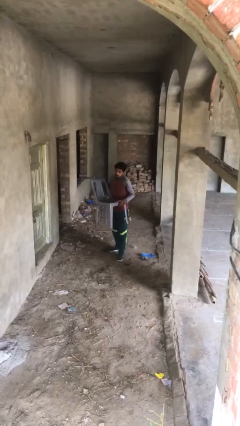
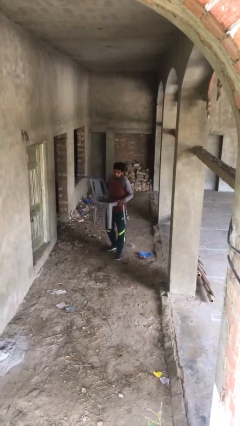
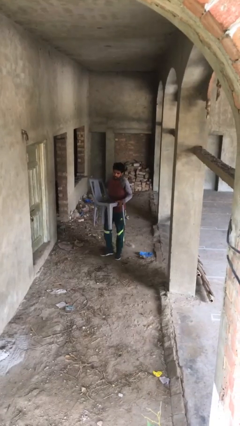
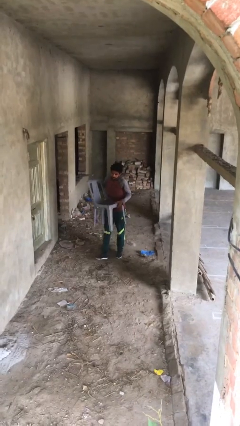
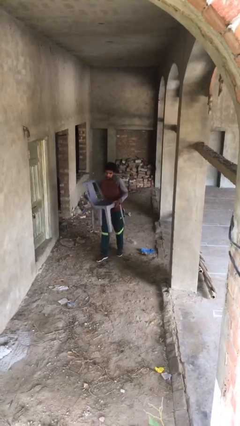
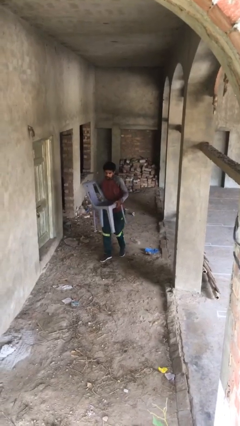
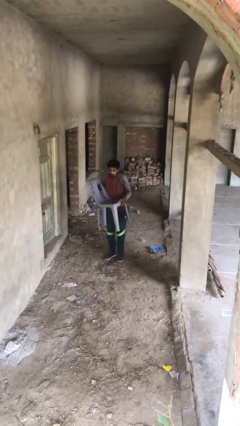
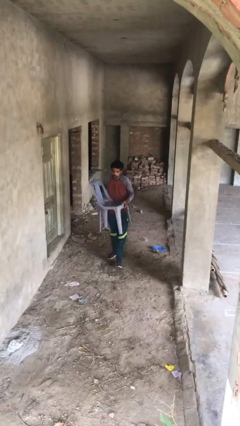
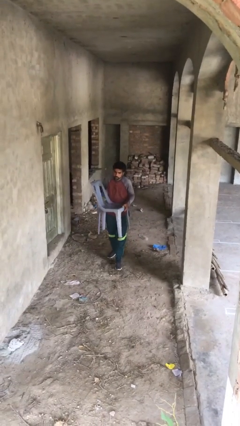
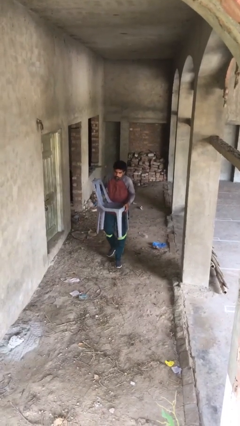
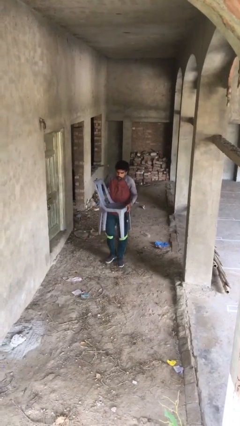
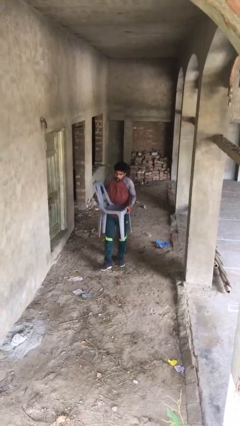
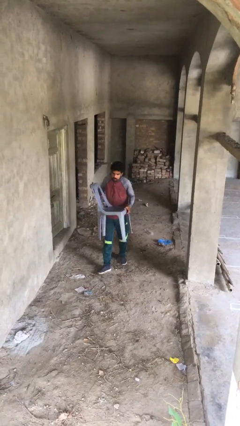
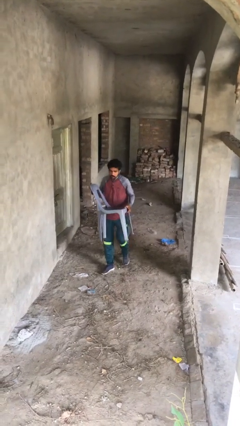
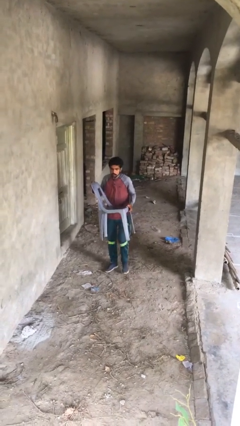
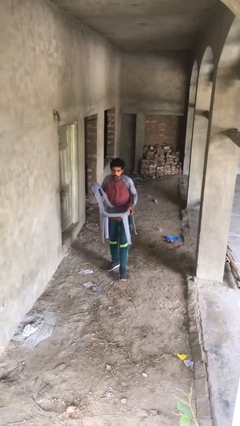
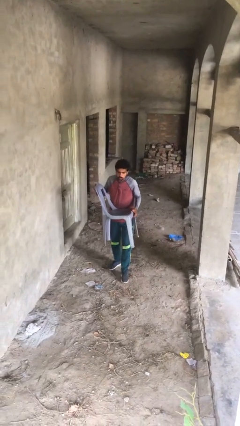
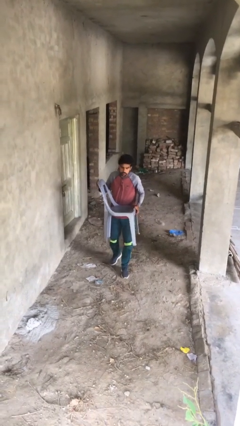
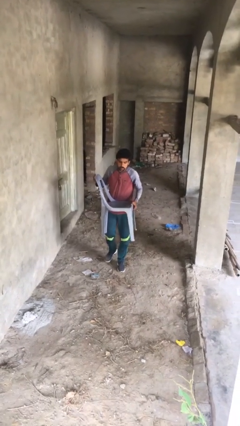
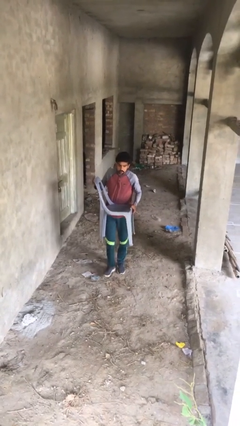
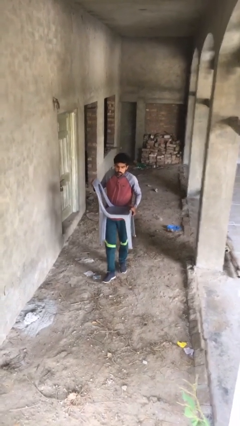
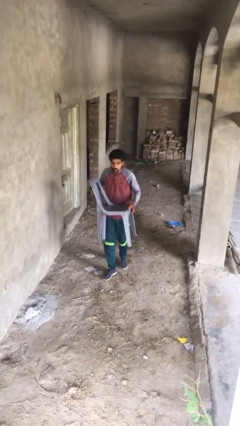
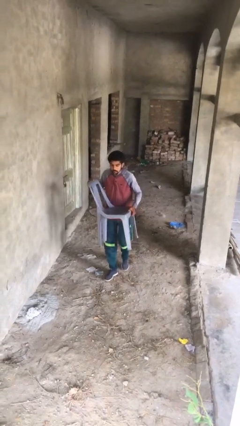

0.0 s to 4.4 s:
person carries heavy object

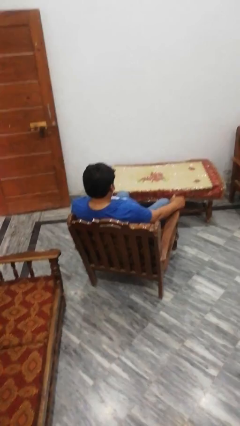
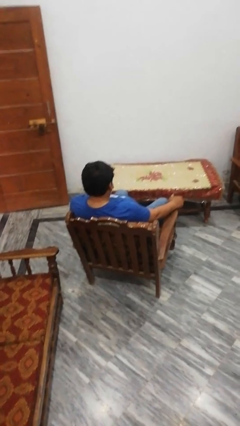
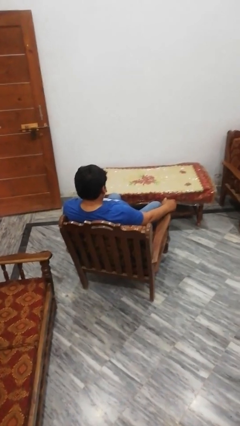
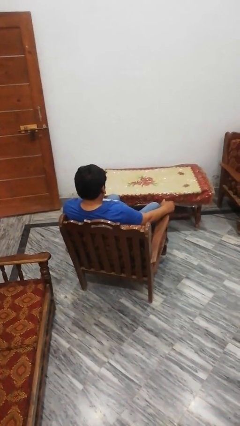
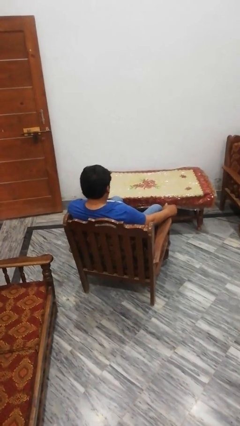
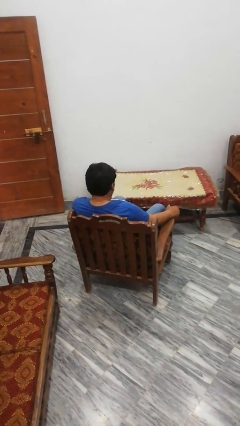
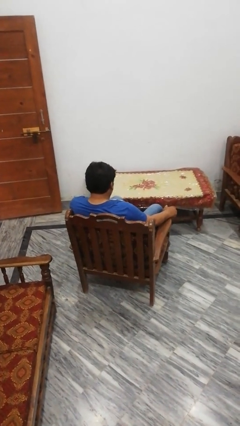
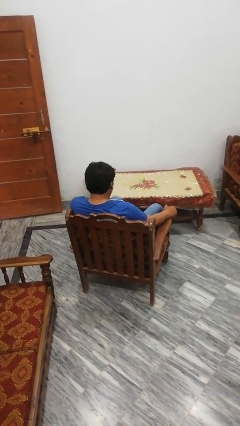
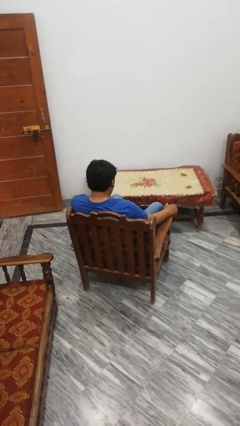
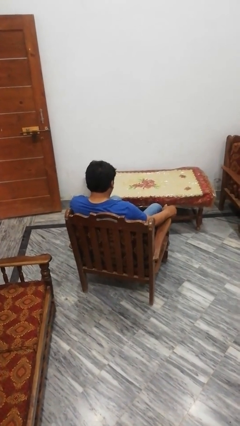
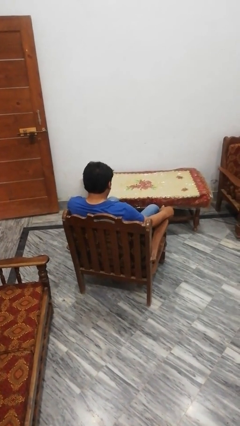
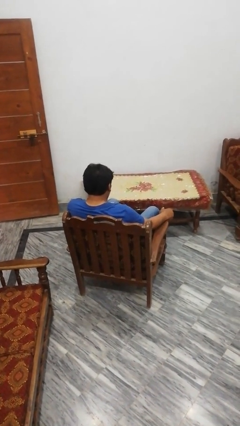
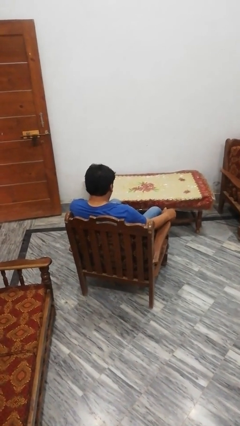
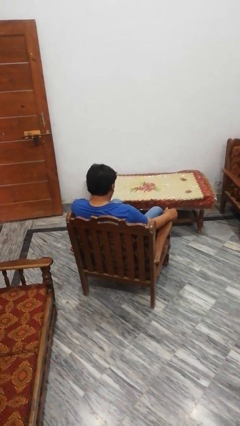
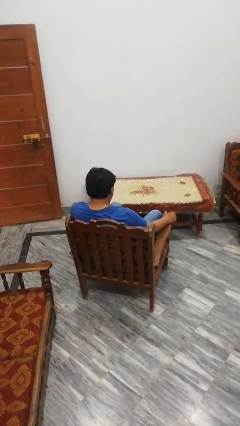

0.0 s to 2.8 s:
person pushes in chair

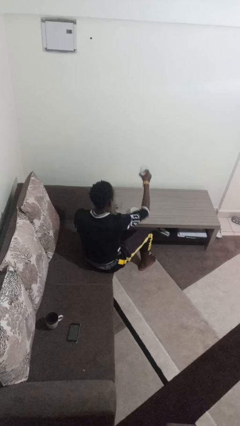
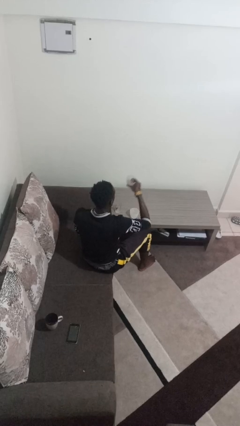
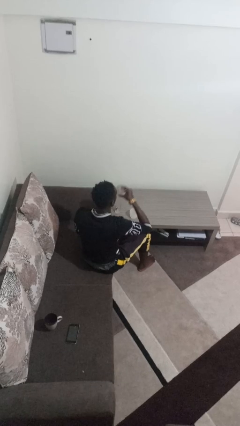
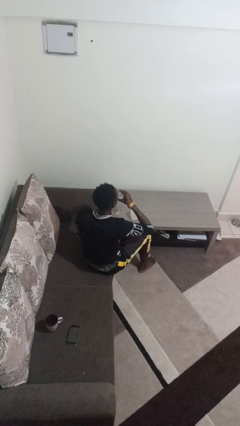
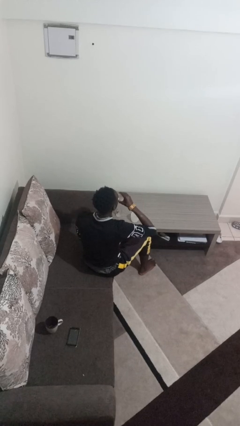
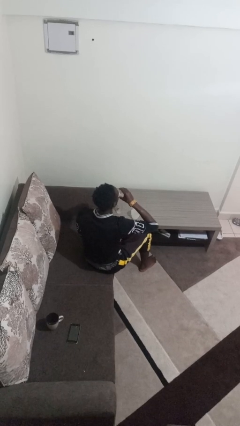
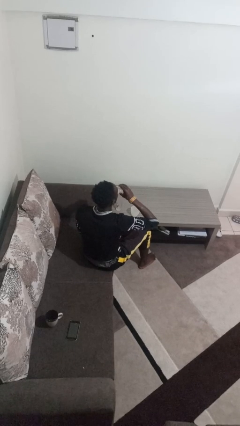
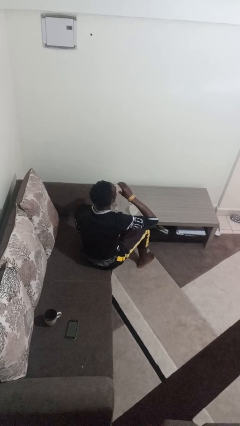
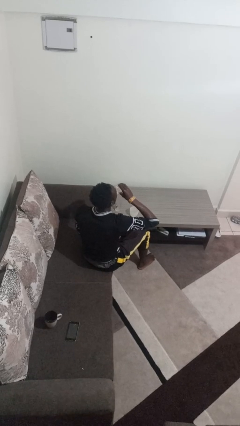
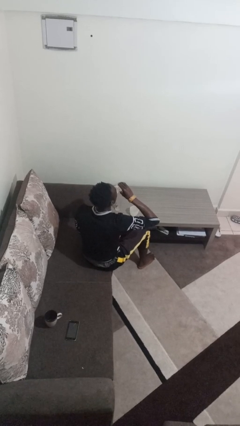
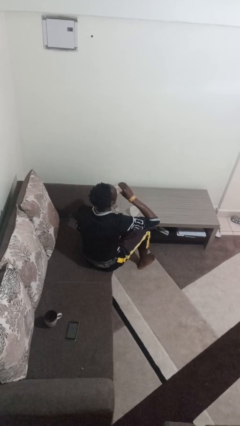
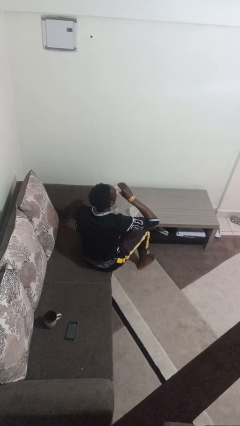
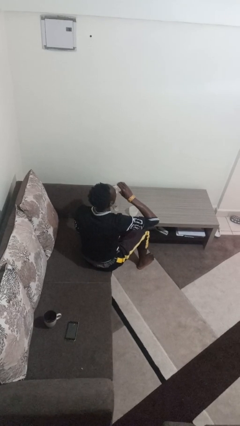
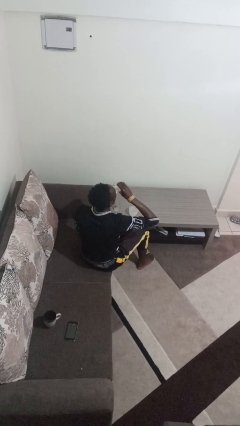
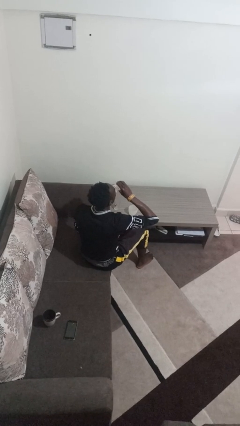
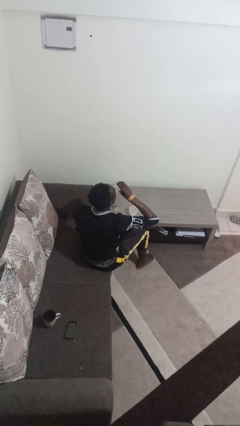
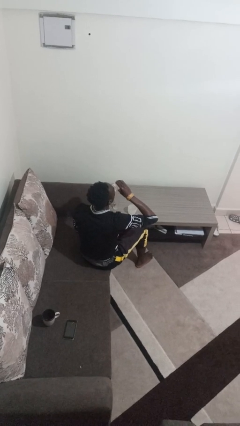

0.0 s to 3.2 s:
person drinks from shotglass

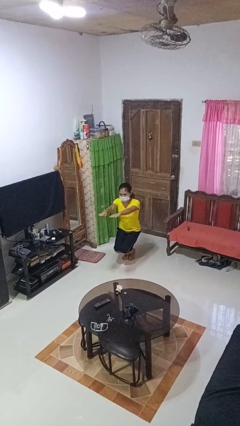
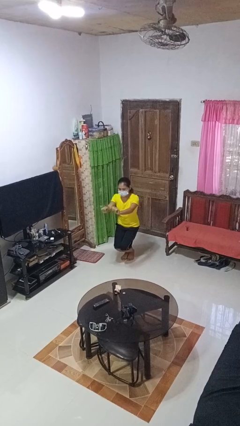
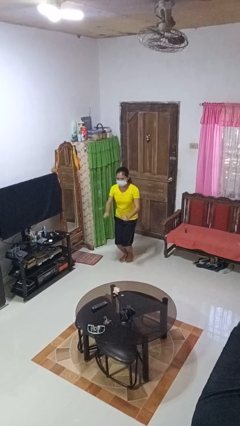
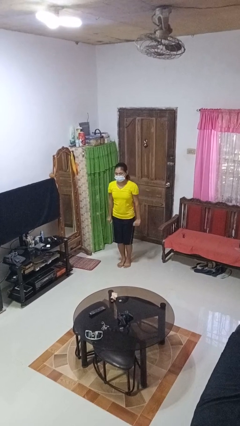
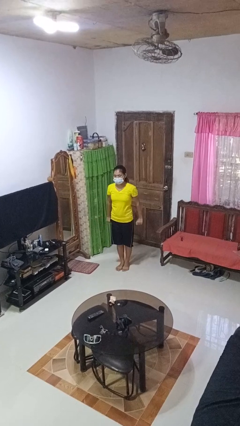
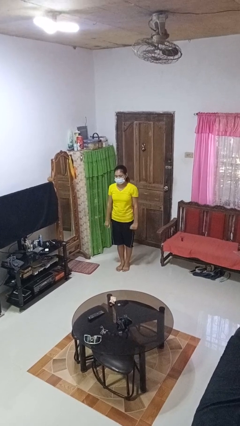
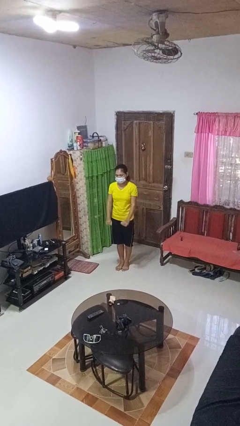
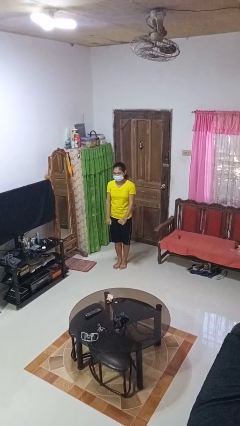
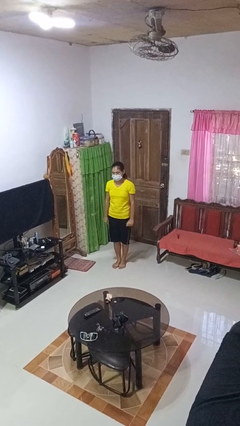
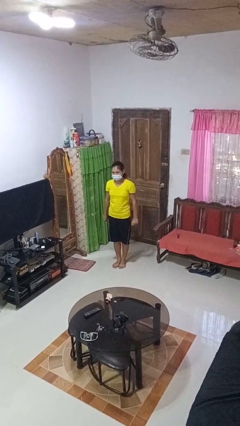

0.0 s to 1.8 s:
person stands up

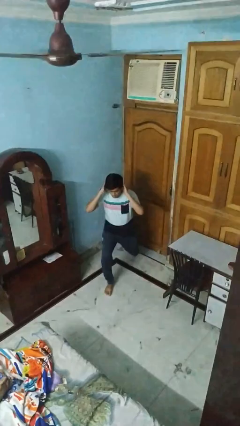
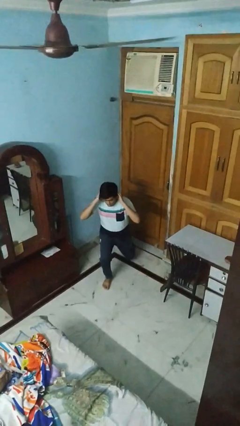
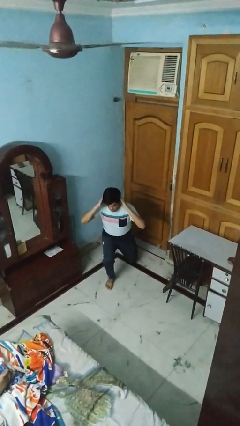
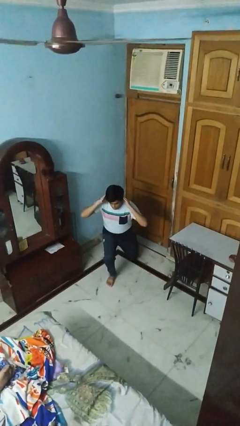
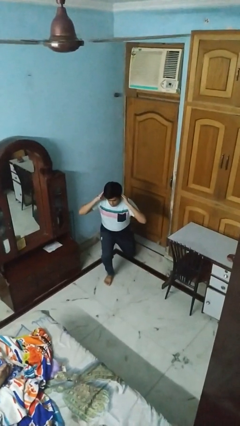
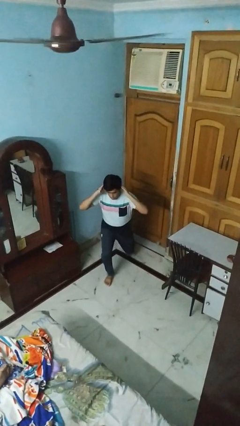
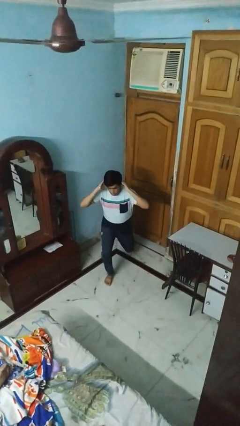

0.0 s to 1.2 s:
person exercises with lunges

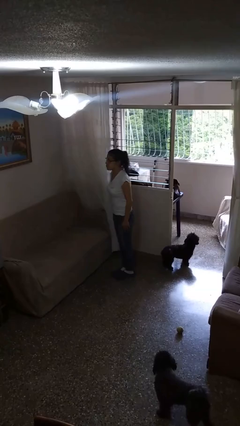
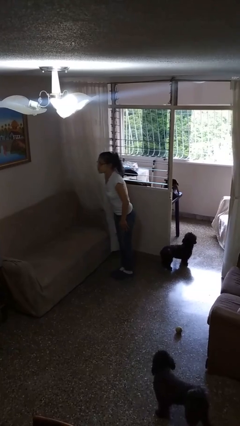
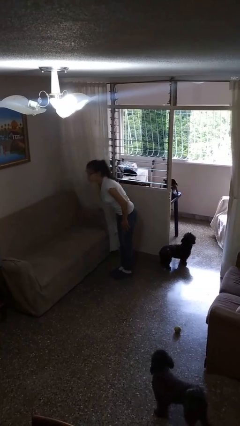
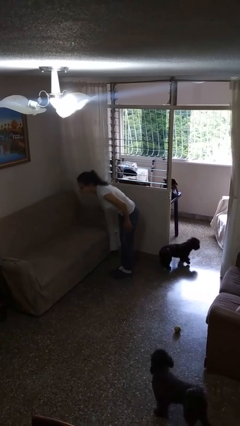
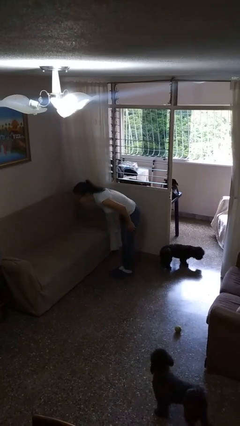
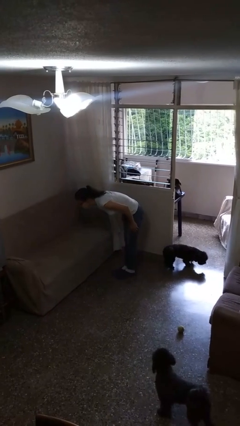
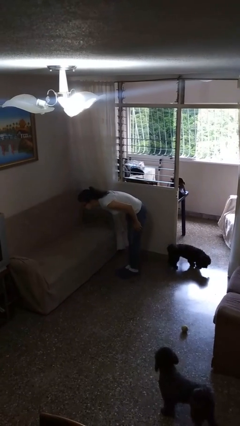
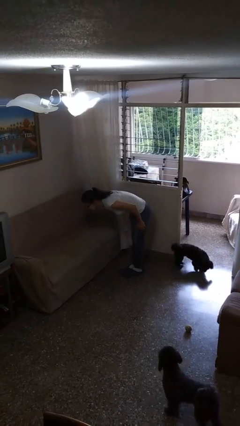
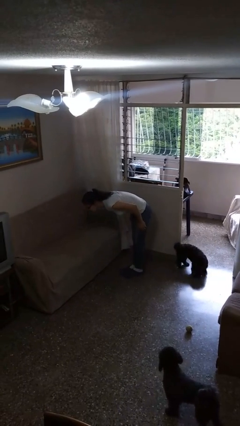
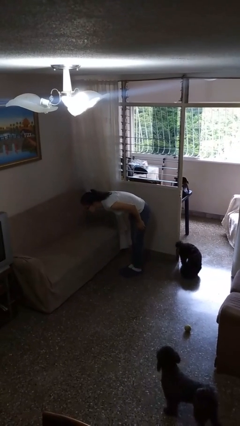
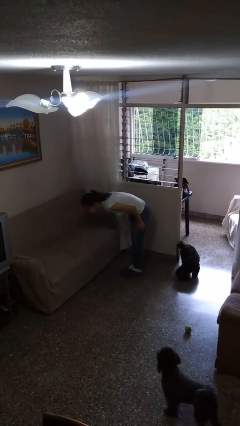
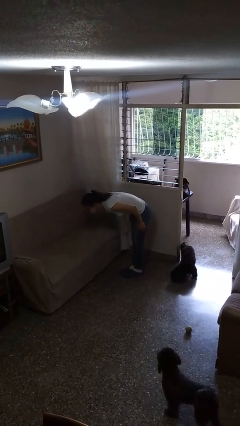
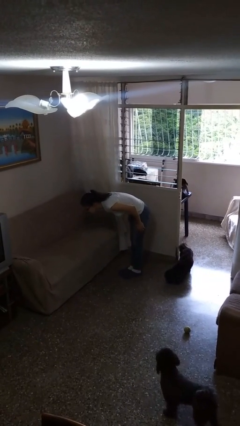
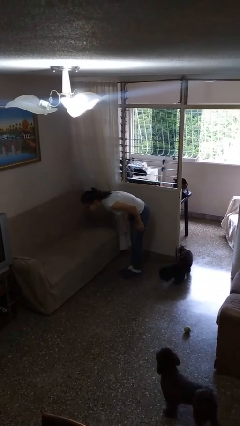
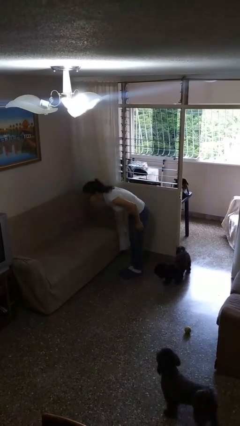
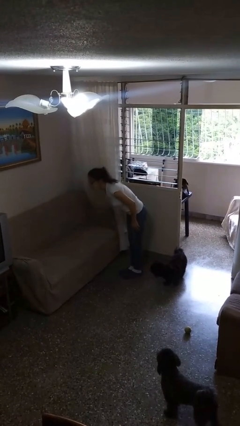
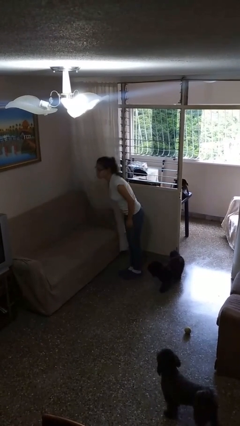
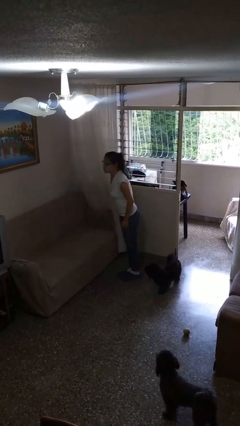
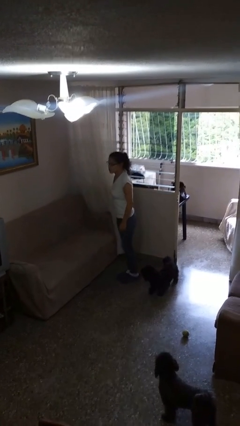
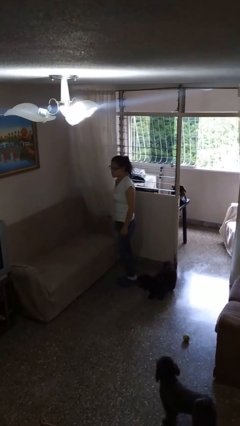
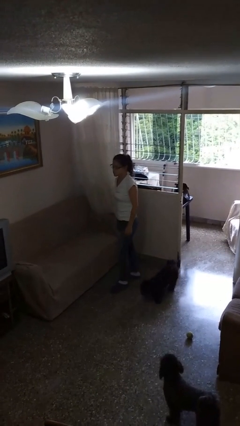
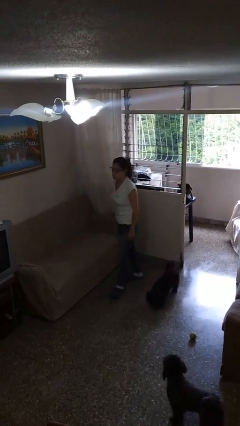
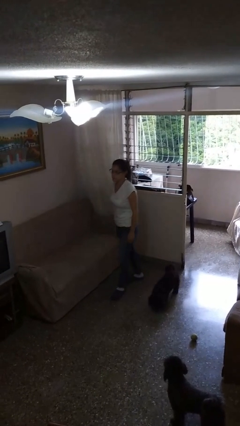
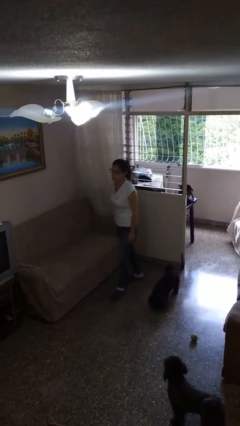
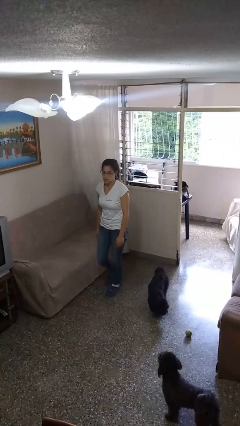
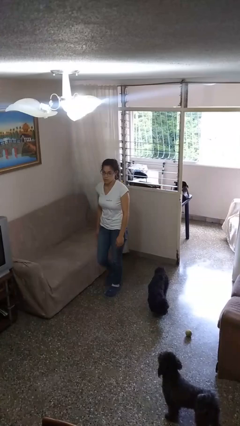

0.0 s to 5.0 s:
person bows
